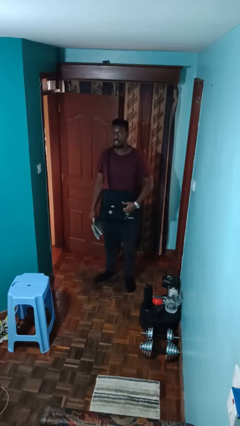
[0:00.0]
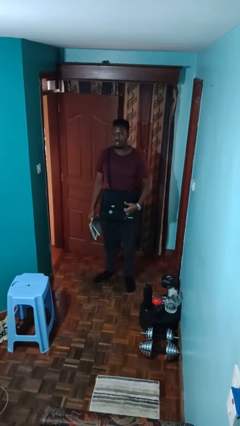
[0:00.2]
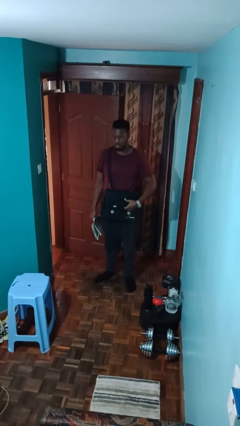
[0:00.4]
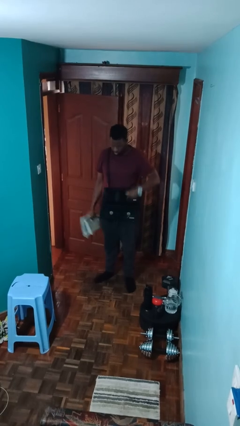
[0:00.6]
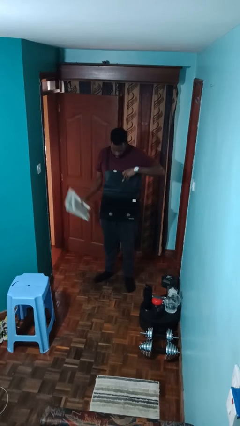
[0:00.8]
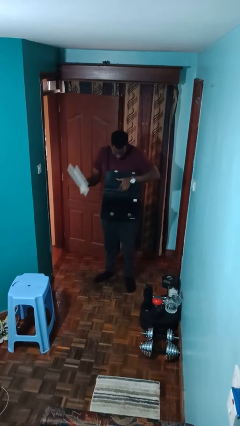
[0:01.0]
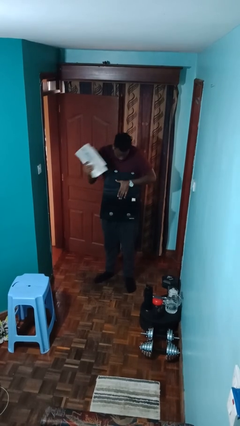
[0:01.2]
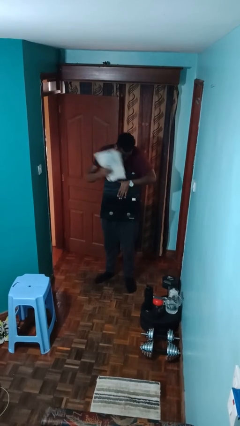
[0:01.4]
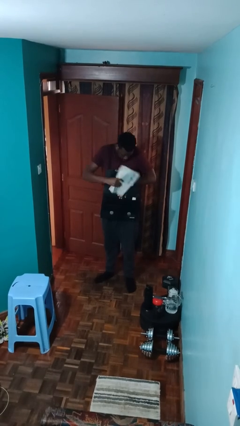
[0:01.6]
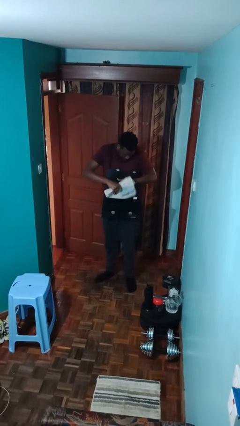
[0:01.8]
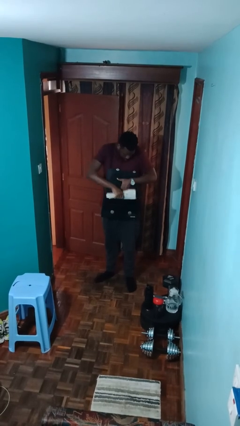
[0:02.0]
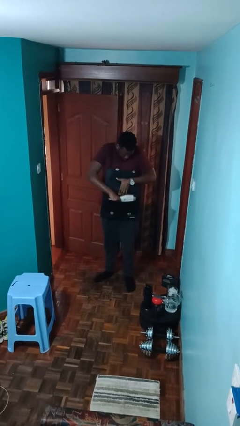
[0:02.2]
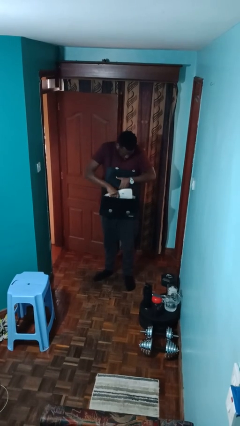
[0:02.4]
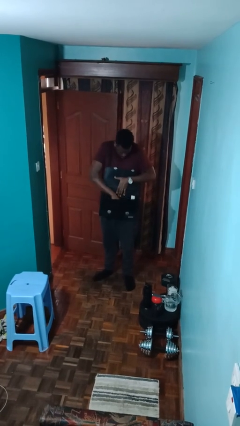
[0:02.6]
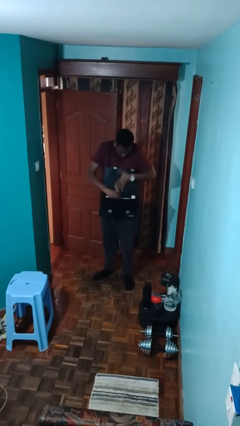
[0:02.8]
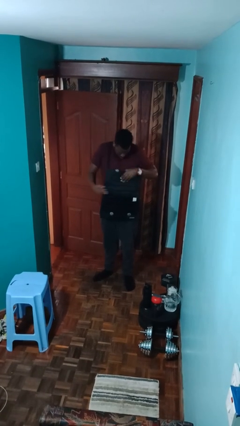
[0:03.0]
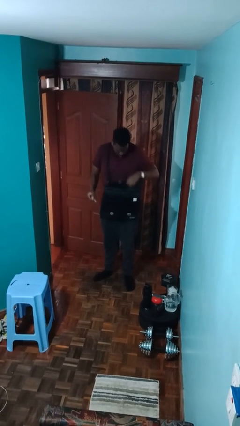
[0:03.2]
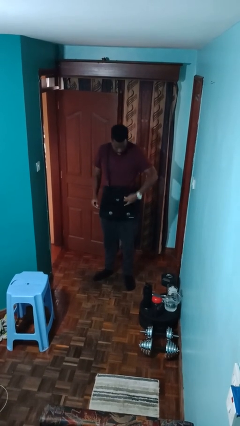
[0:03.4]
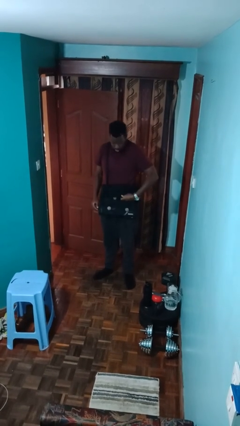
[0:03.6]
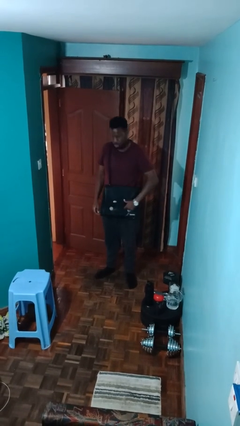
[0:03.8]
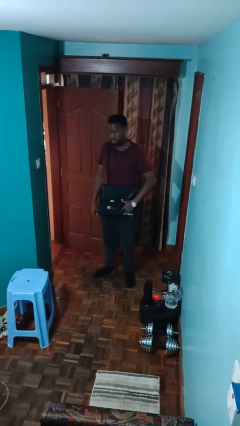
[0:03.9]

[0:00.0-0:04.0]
person puts object into purse

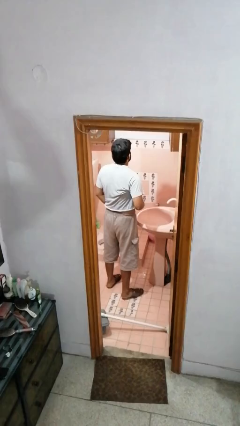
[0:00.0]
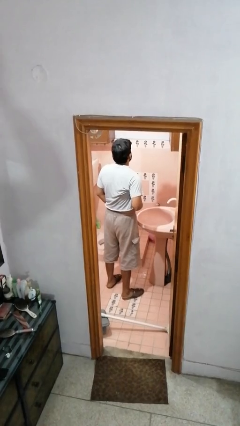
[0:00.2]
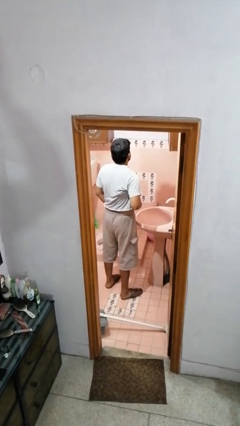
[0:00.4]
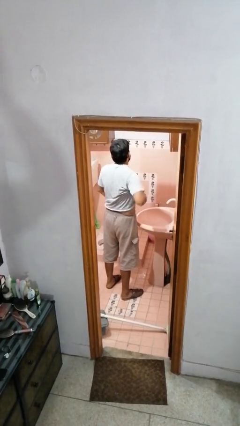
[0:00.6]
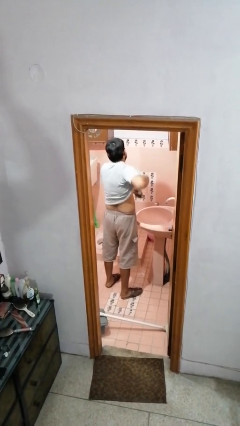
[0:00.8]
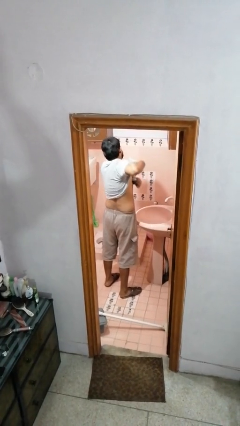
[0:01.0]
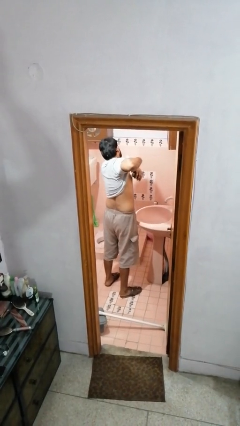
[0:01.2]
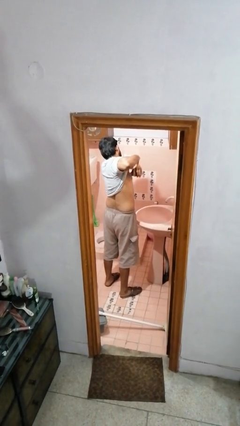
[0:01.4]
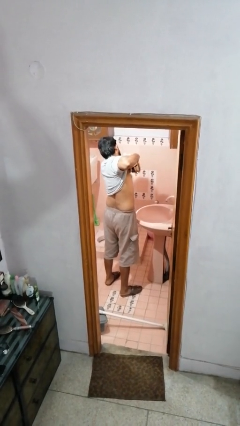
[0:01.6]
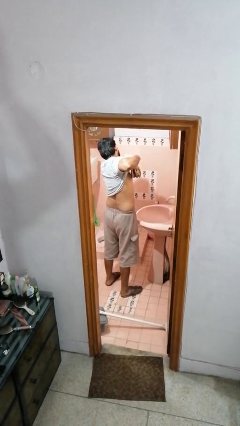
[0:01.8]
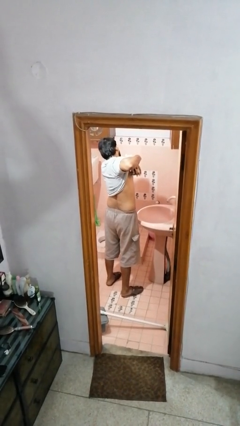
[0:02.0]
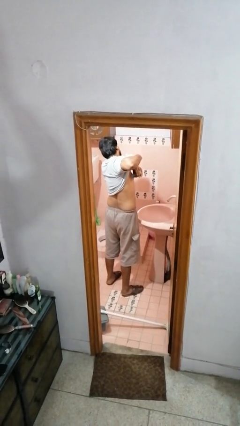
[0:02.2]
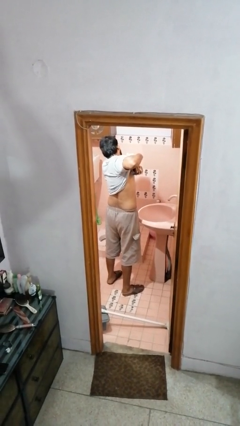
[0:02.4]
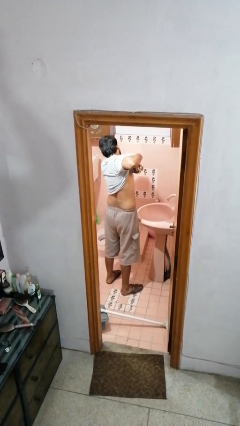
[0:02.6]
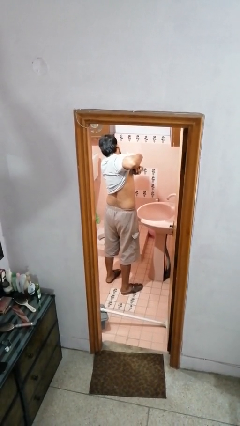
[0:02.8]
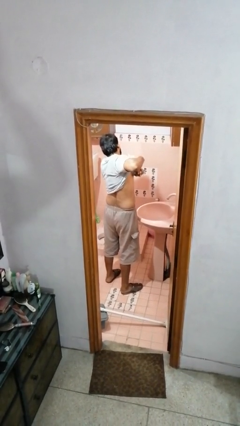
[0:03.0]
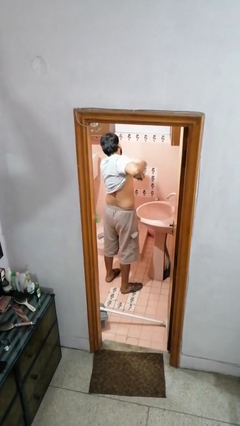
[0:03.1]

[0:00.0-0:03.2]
person applies deodorant

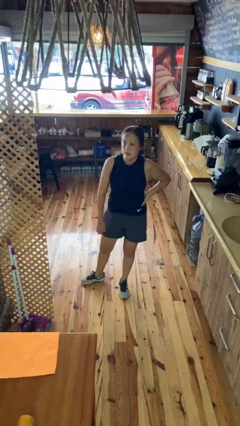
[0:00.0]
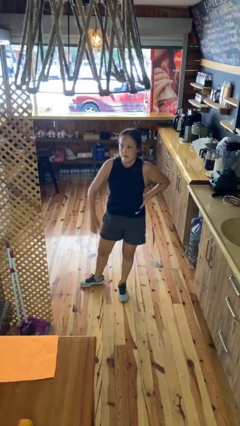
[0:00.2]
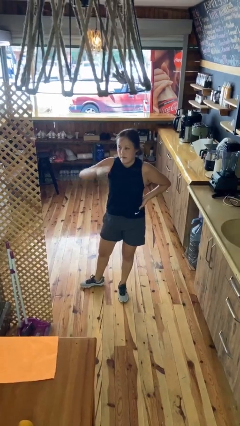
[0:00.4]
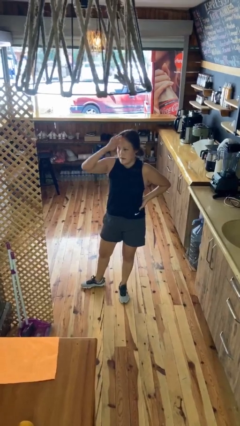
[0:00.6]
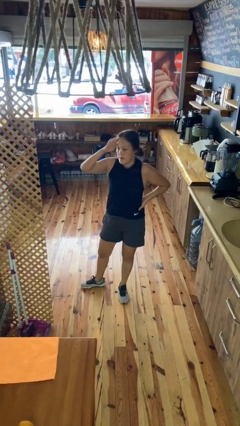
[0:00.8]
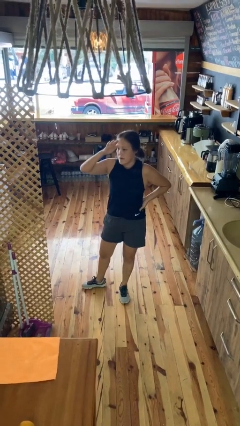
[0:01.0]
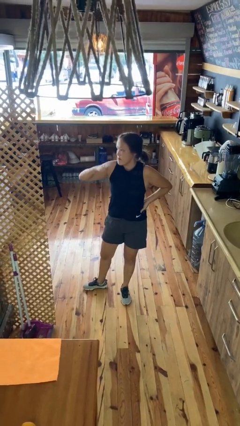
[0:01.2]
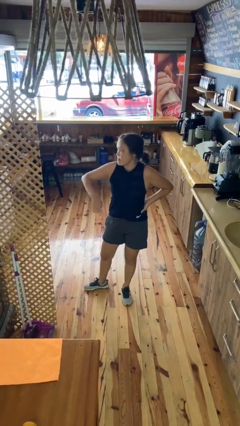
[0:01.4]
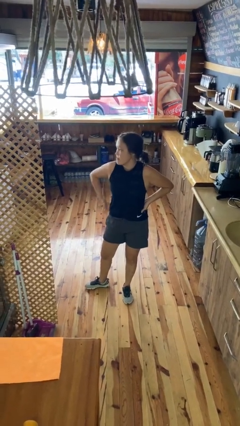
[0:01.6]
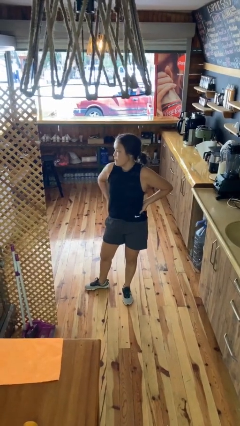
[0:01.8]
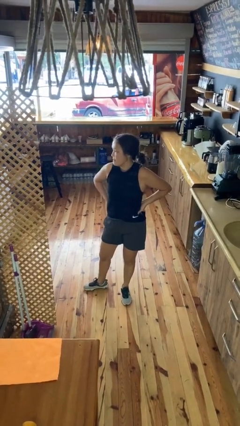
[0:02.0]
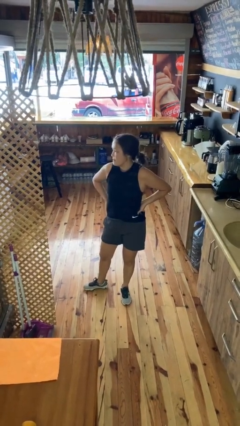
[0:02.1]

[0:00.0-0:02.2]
person salutes

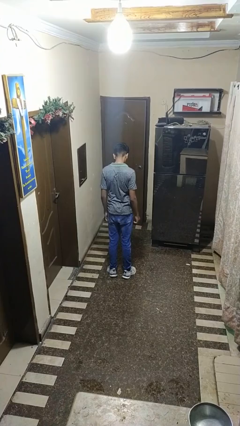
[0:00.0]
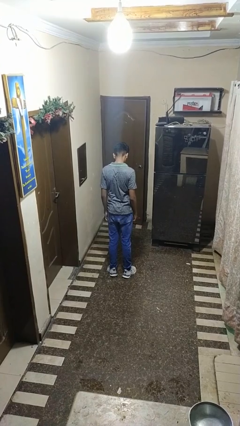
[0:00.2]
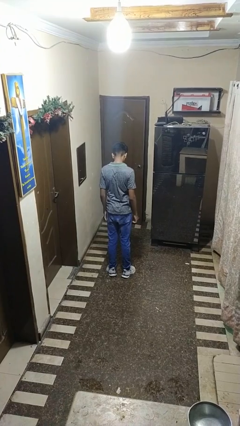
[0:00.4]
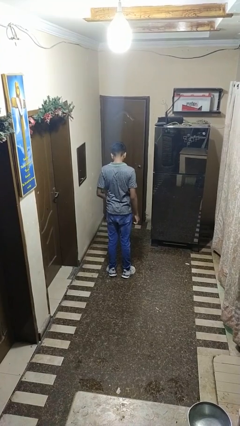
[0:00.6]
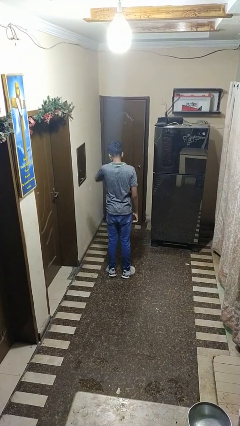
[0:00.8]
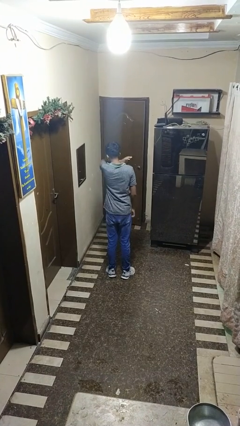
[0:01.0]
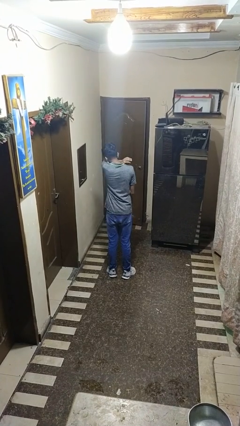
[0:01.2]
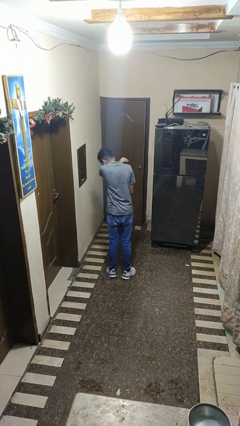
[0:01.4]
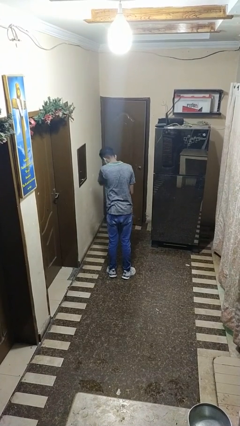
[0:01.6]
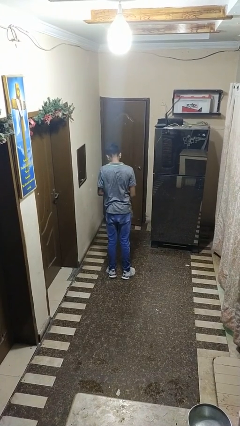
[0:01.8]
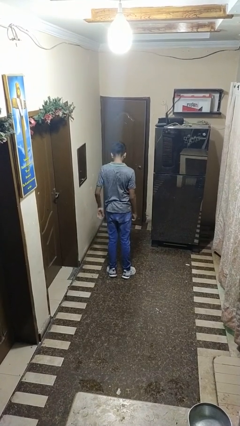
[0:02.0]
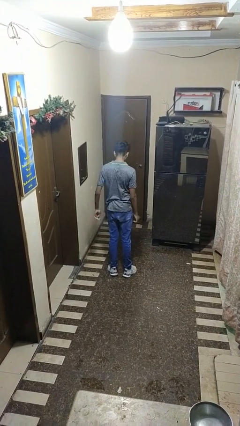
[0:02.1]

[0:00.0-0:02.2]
person sneezes into arm

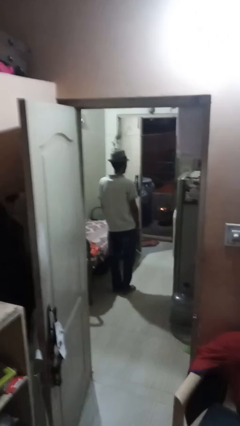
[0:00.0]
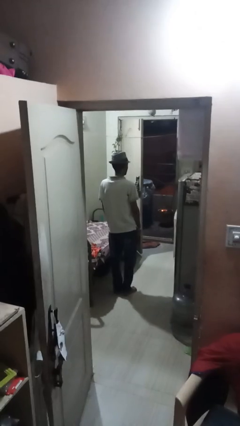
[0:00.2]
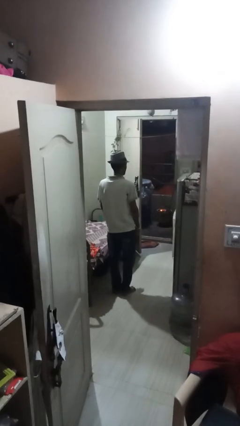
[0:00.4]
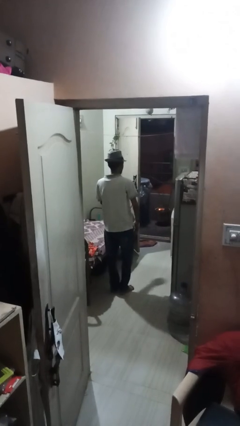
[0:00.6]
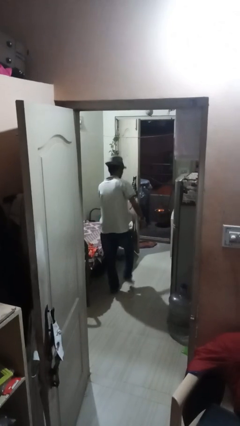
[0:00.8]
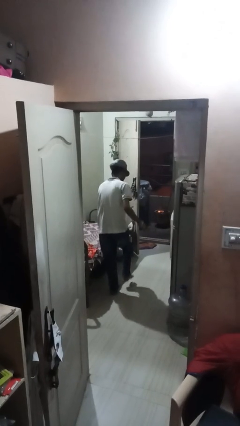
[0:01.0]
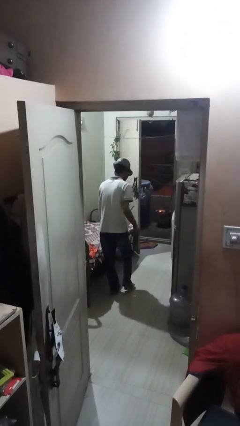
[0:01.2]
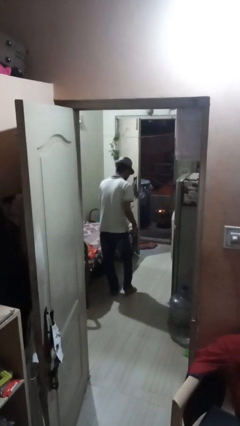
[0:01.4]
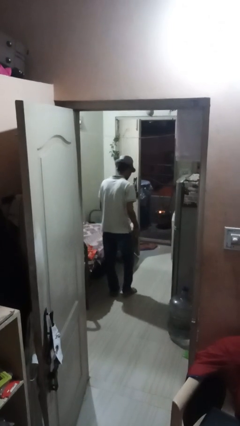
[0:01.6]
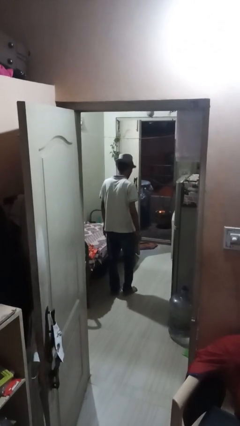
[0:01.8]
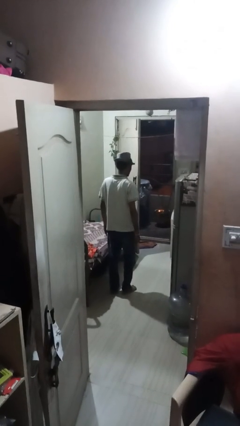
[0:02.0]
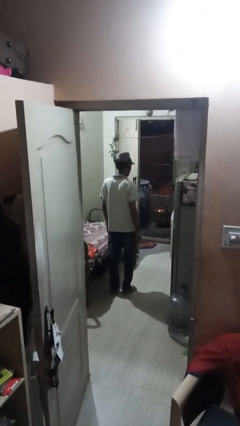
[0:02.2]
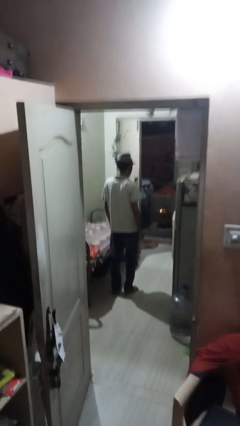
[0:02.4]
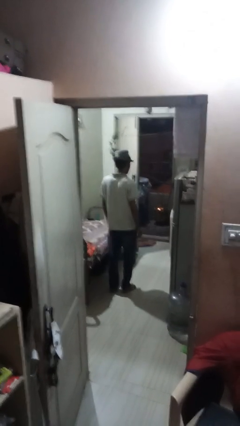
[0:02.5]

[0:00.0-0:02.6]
person swats bug

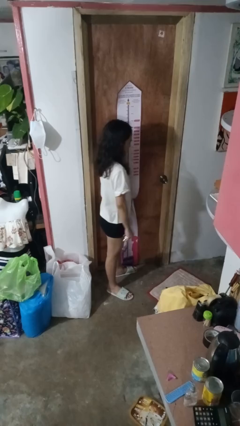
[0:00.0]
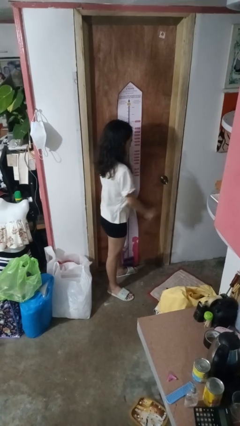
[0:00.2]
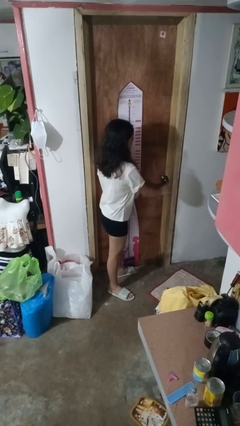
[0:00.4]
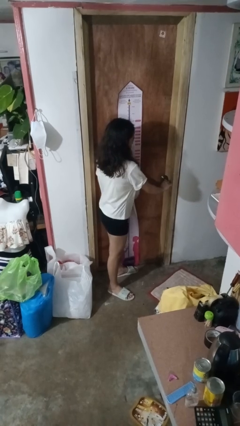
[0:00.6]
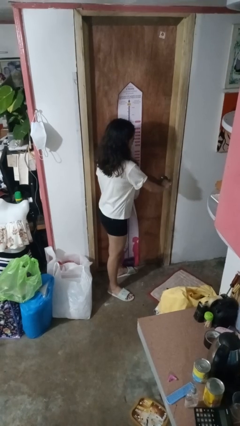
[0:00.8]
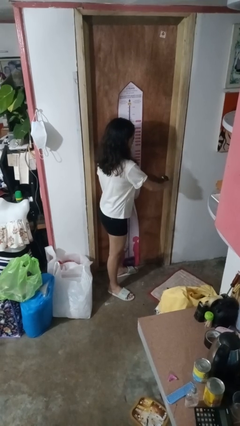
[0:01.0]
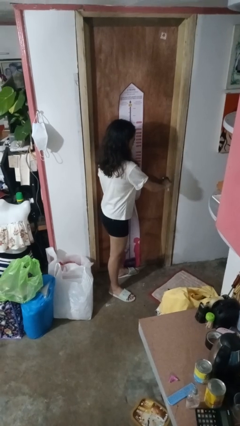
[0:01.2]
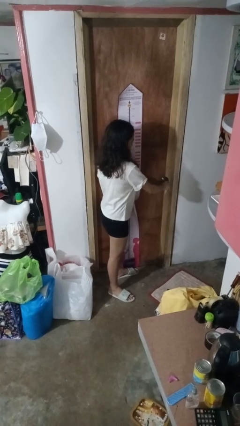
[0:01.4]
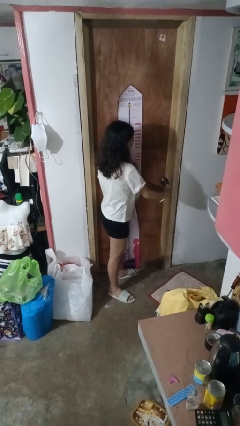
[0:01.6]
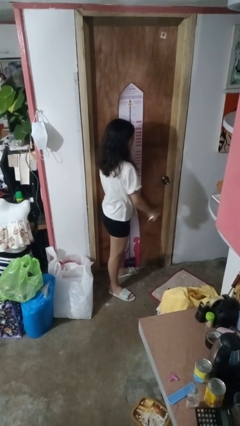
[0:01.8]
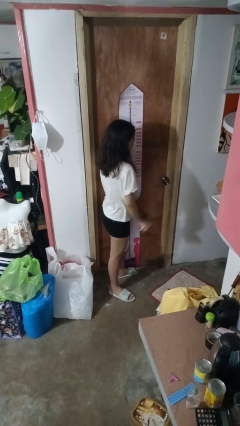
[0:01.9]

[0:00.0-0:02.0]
person locks door with keys

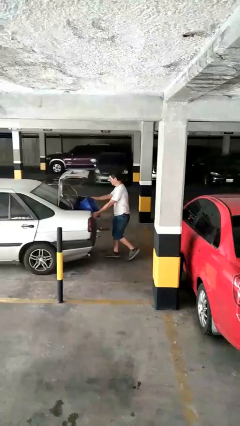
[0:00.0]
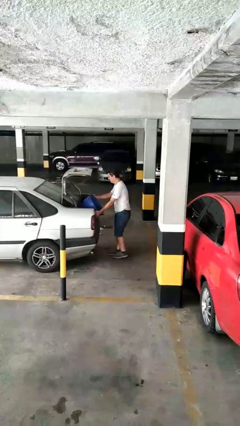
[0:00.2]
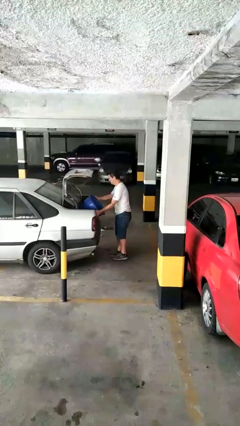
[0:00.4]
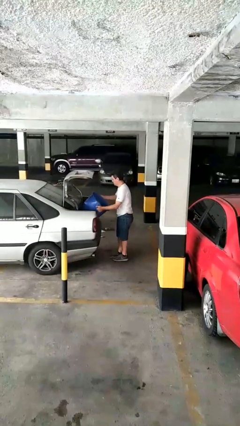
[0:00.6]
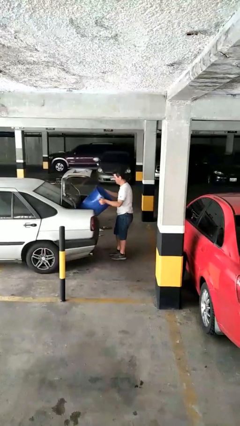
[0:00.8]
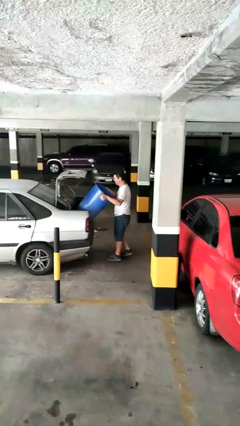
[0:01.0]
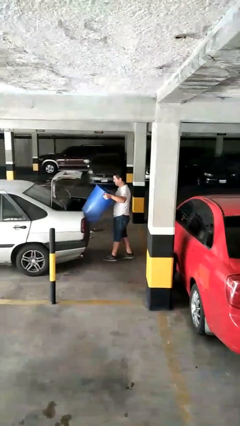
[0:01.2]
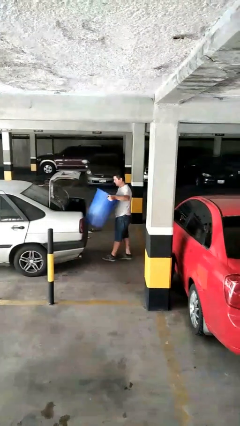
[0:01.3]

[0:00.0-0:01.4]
person unloads car
